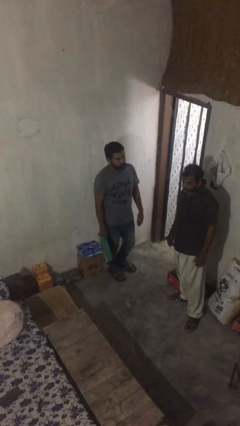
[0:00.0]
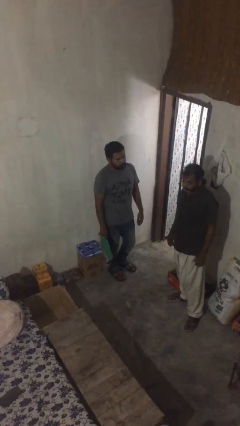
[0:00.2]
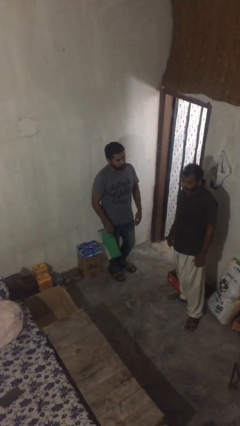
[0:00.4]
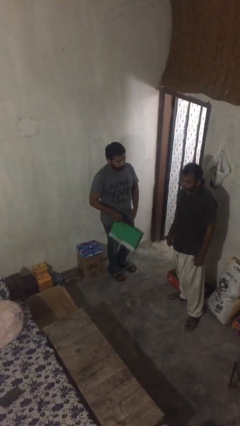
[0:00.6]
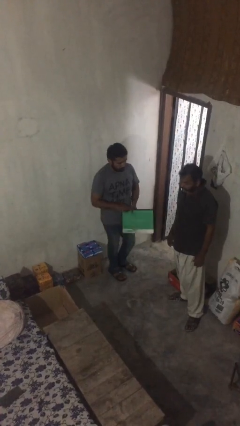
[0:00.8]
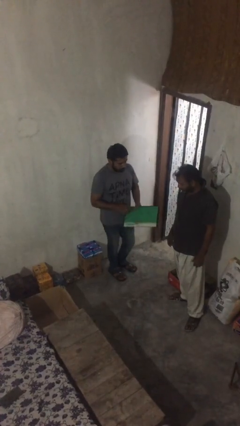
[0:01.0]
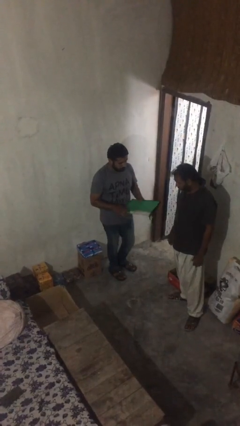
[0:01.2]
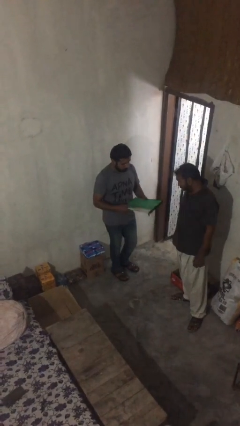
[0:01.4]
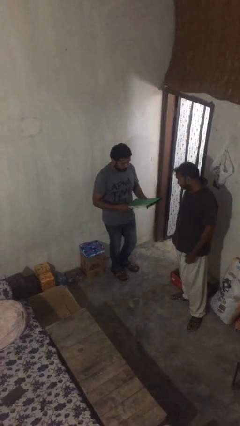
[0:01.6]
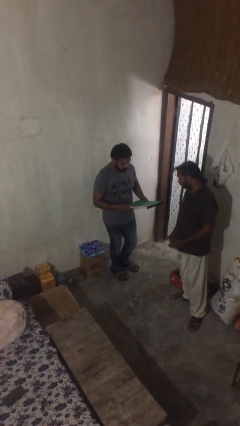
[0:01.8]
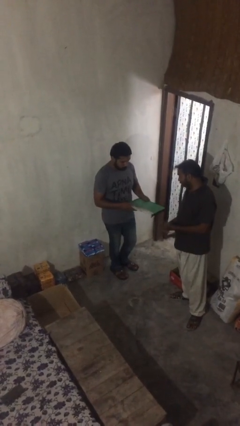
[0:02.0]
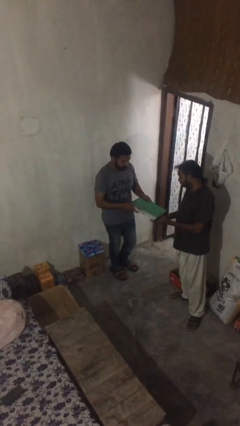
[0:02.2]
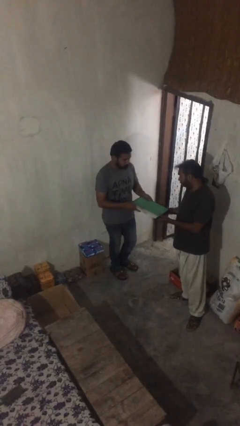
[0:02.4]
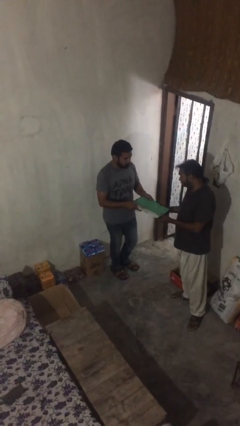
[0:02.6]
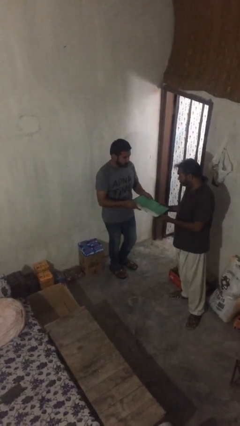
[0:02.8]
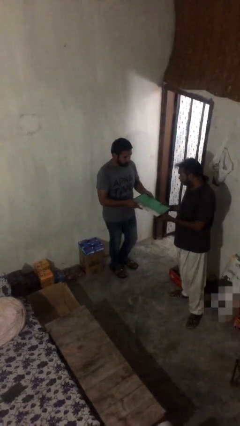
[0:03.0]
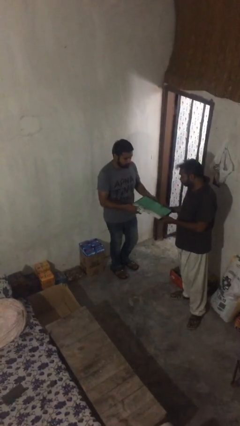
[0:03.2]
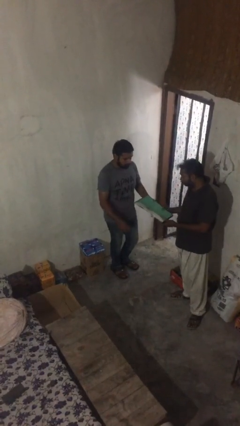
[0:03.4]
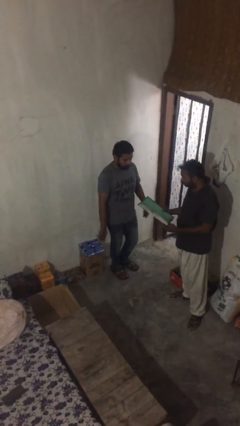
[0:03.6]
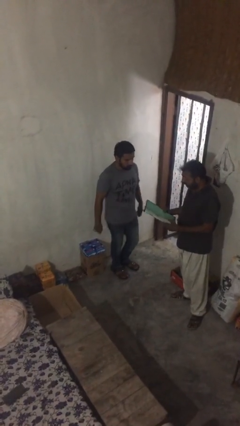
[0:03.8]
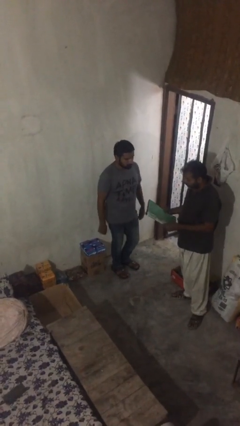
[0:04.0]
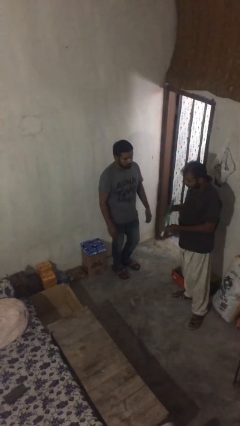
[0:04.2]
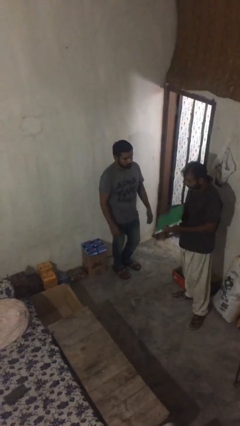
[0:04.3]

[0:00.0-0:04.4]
person transfers object to person

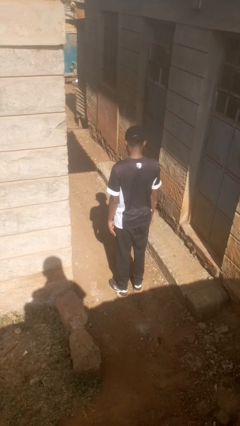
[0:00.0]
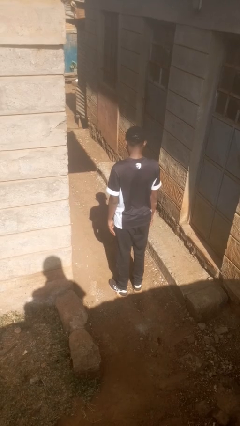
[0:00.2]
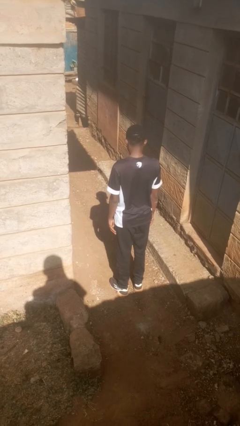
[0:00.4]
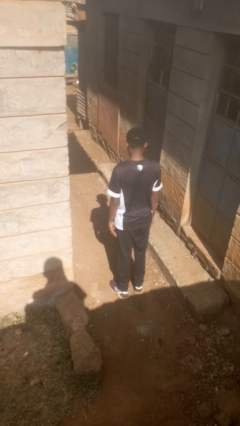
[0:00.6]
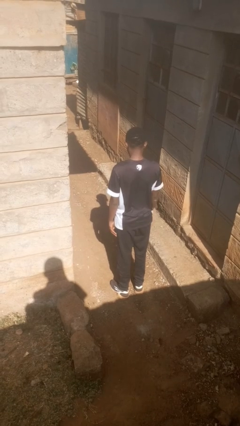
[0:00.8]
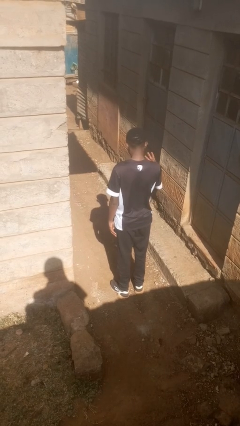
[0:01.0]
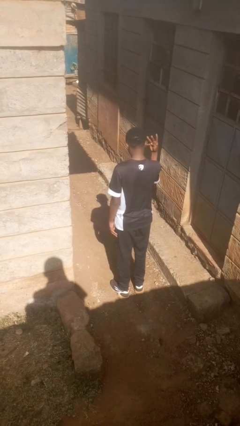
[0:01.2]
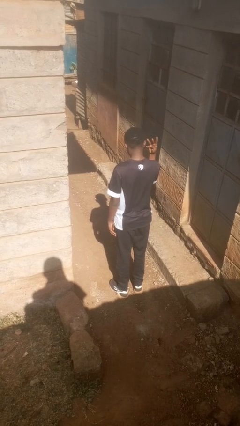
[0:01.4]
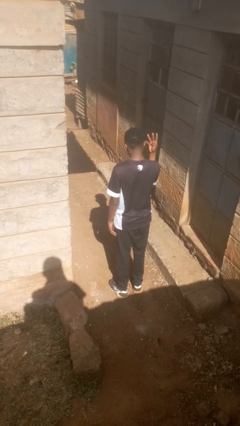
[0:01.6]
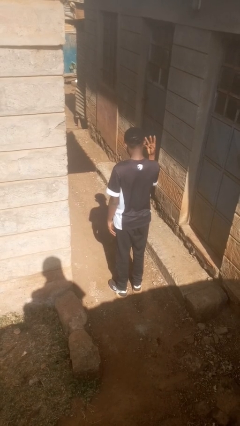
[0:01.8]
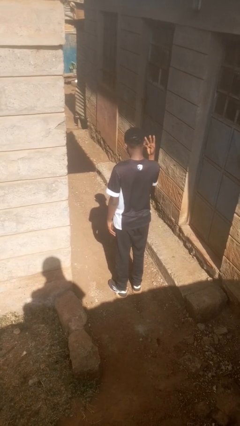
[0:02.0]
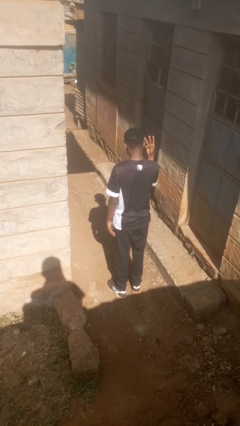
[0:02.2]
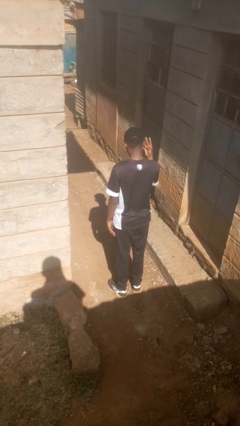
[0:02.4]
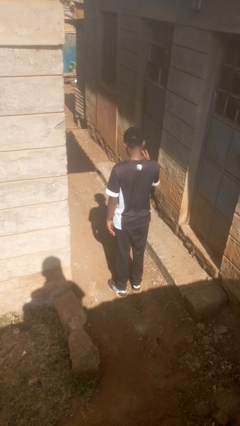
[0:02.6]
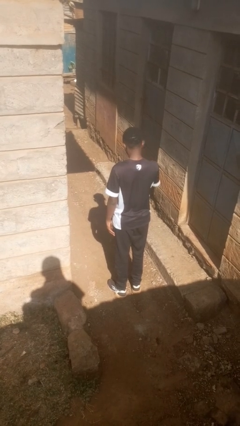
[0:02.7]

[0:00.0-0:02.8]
person gestures number four

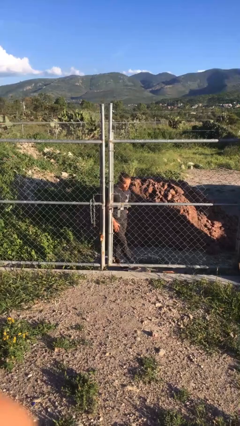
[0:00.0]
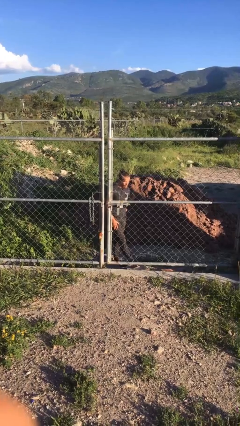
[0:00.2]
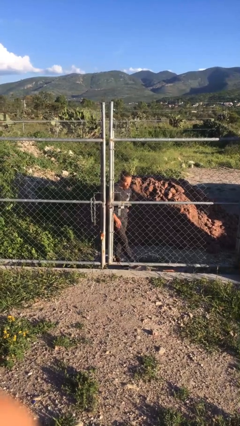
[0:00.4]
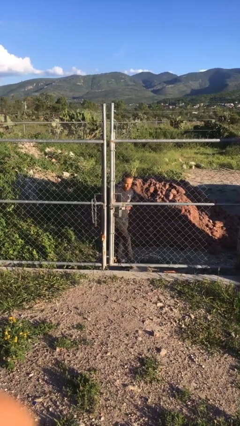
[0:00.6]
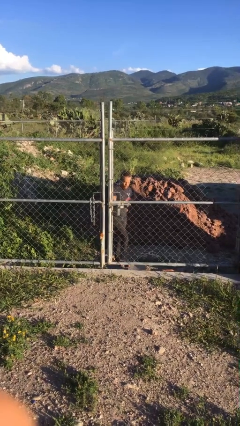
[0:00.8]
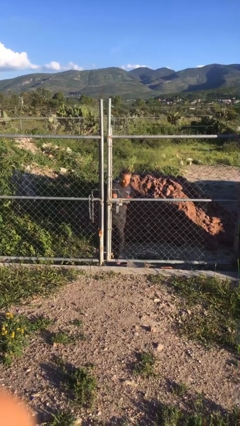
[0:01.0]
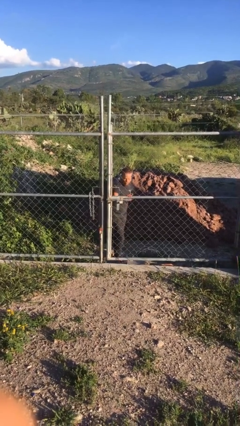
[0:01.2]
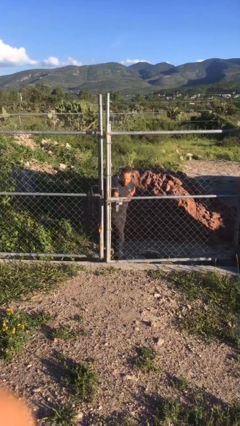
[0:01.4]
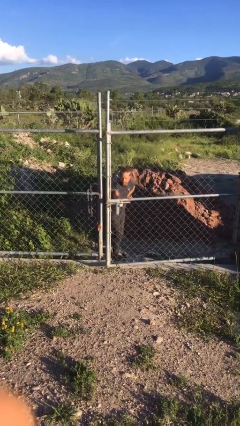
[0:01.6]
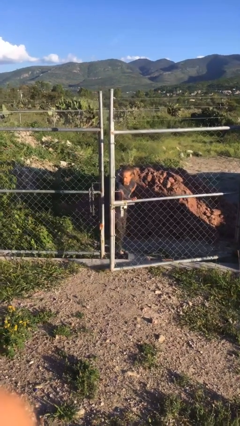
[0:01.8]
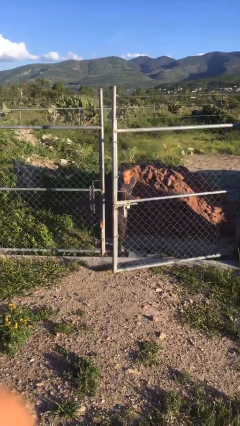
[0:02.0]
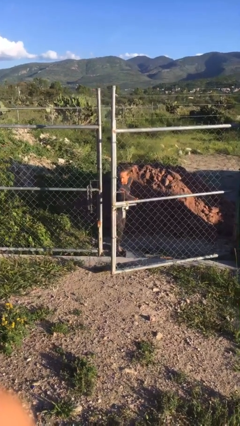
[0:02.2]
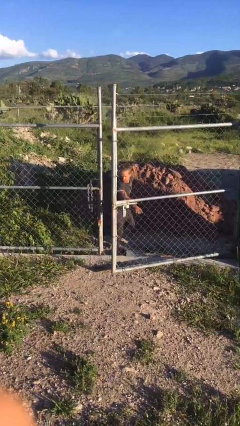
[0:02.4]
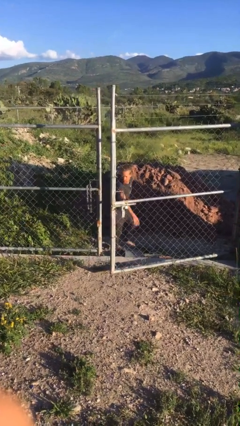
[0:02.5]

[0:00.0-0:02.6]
person opens gate

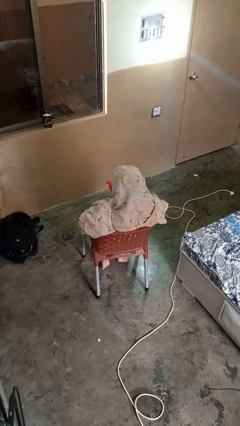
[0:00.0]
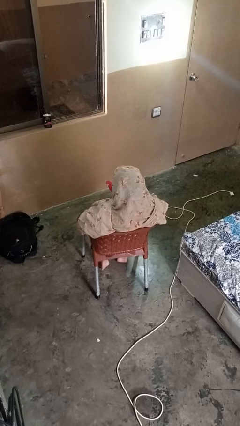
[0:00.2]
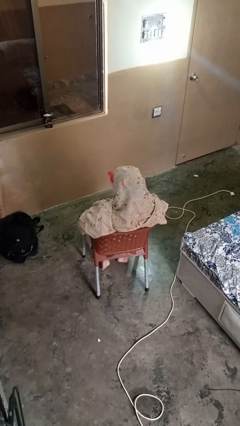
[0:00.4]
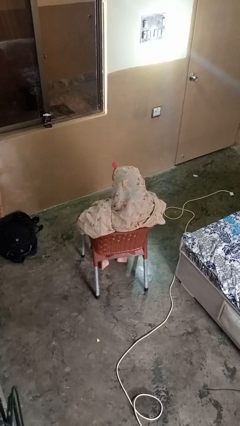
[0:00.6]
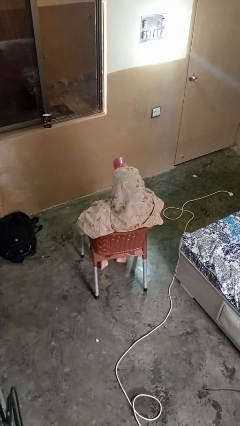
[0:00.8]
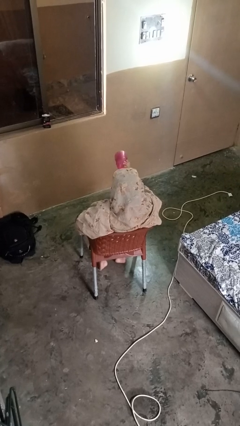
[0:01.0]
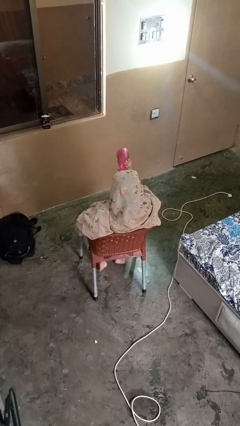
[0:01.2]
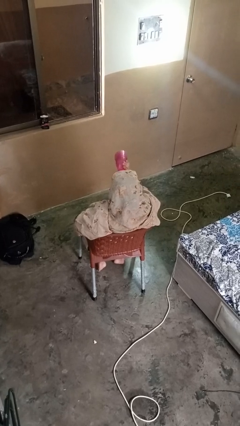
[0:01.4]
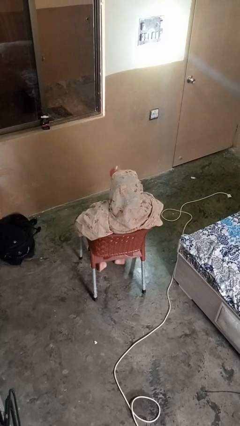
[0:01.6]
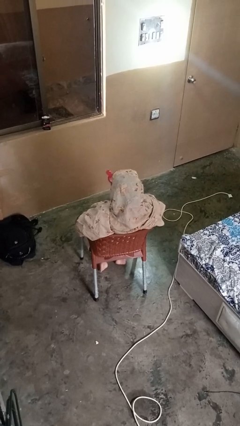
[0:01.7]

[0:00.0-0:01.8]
person drinks from bottle

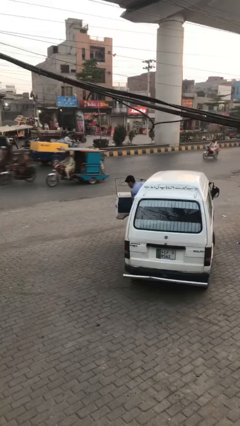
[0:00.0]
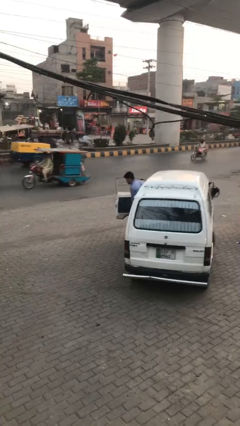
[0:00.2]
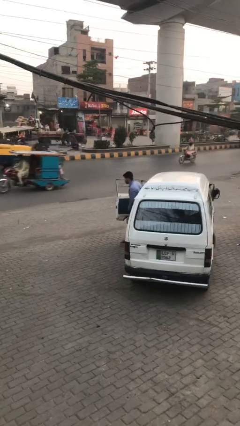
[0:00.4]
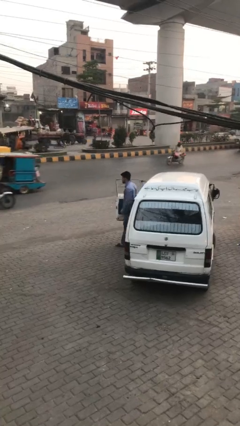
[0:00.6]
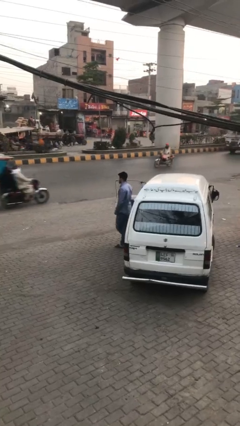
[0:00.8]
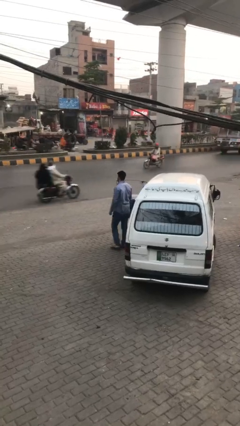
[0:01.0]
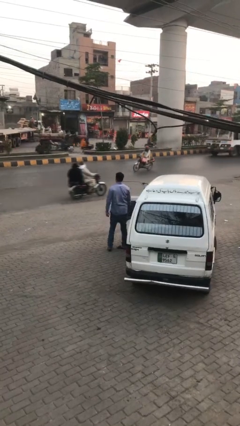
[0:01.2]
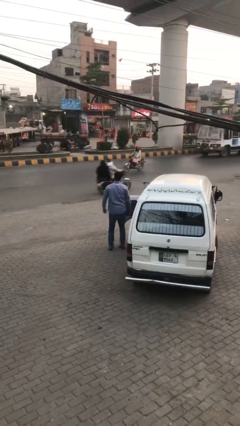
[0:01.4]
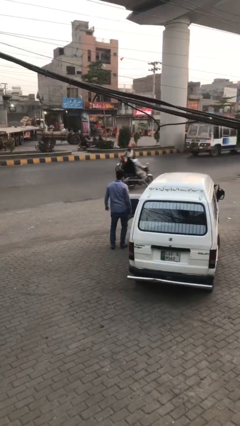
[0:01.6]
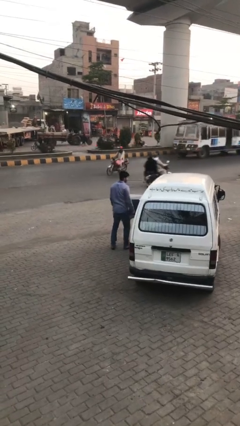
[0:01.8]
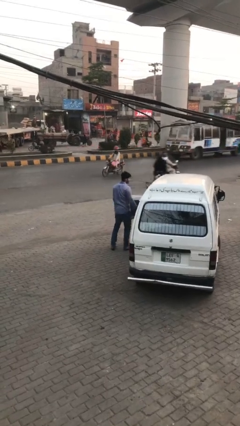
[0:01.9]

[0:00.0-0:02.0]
person exits car

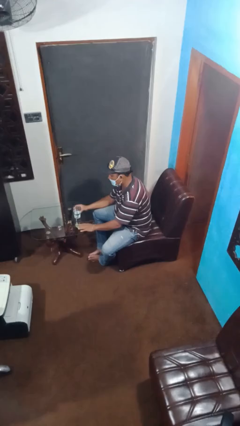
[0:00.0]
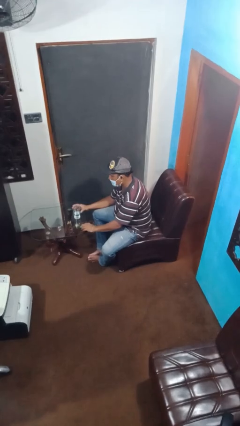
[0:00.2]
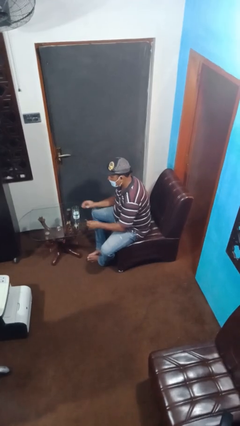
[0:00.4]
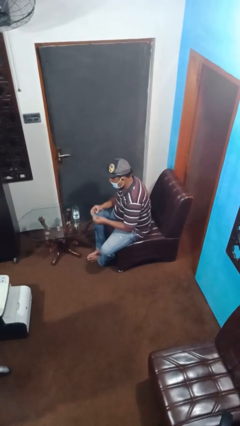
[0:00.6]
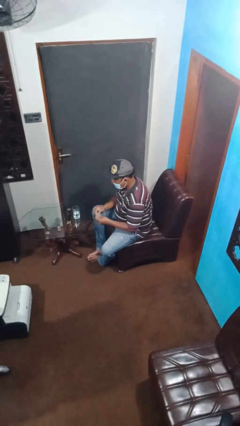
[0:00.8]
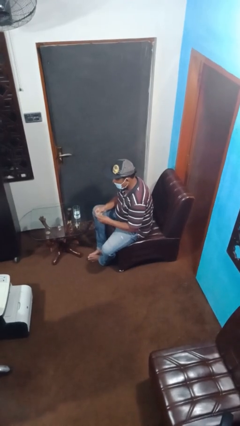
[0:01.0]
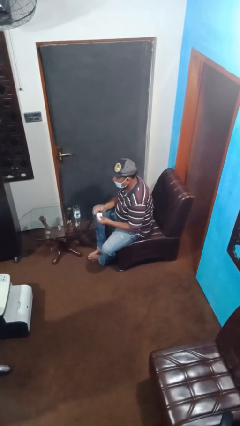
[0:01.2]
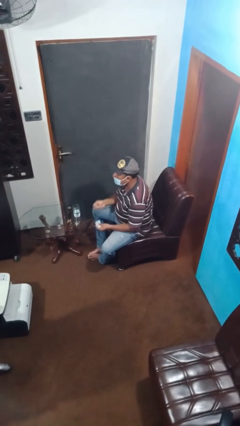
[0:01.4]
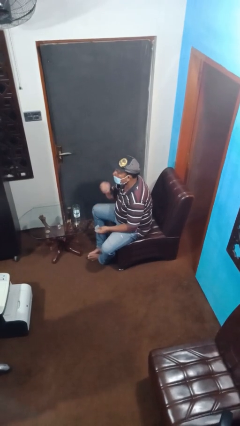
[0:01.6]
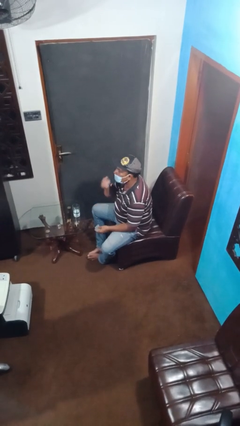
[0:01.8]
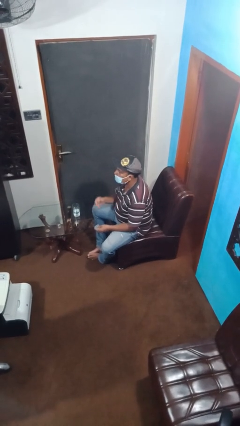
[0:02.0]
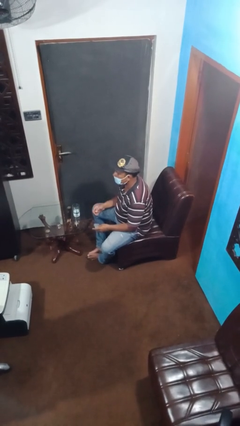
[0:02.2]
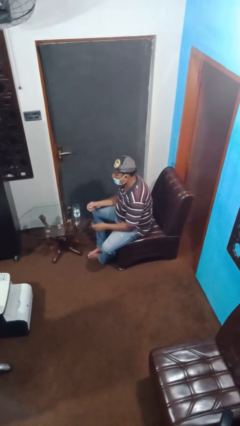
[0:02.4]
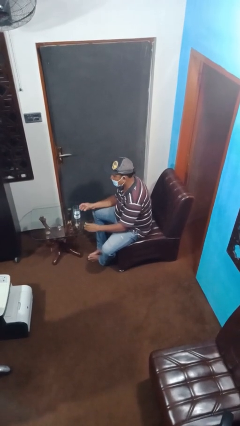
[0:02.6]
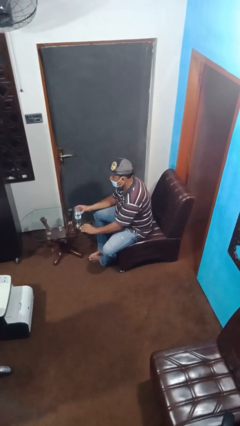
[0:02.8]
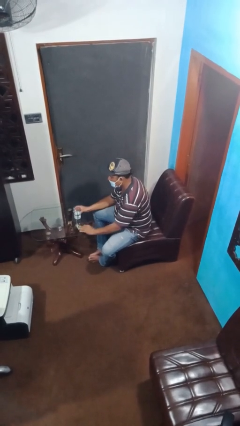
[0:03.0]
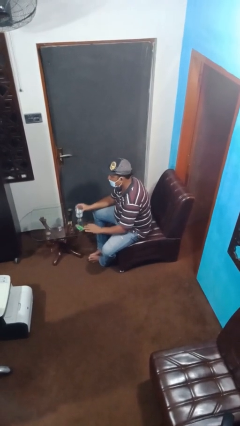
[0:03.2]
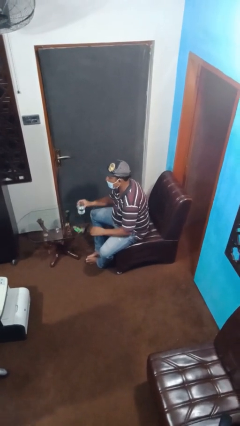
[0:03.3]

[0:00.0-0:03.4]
person takes medicine pills

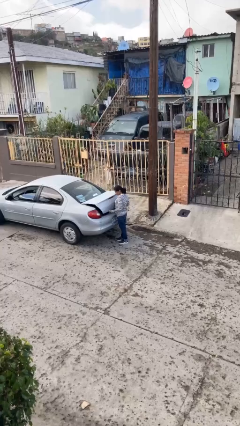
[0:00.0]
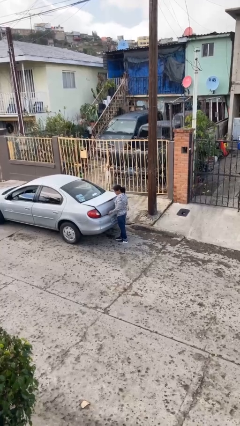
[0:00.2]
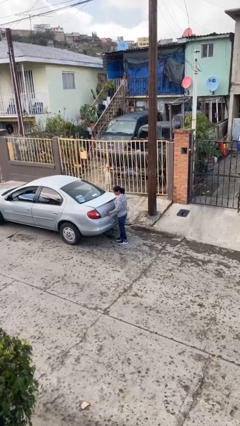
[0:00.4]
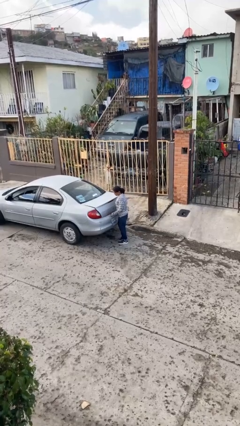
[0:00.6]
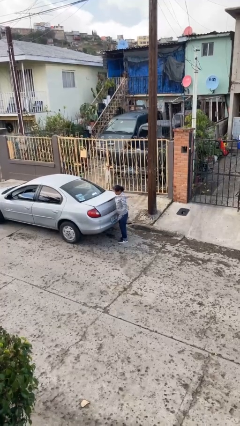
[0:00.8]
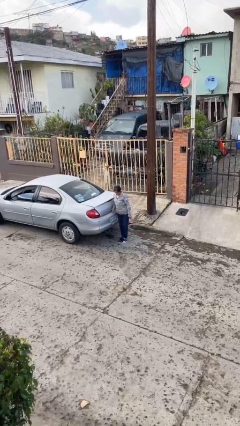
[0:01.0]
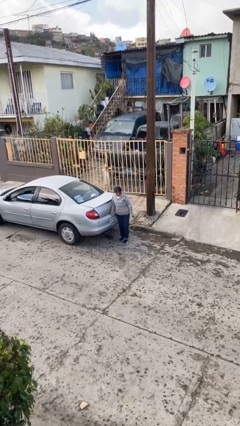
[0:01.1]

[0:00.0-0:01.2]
person closes car trunk
